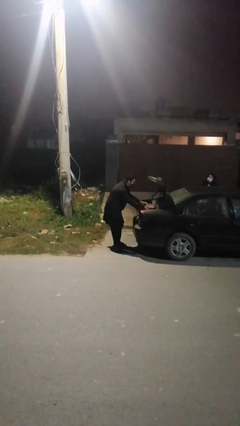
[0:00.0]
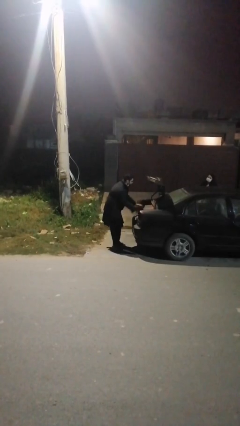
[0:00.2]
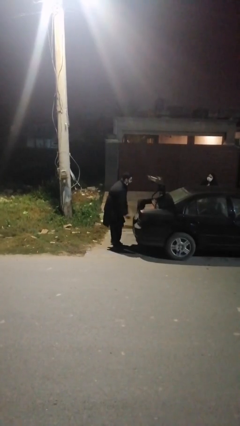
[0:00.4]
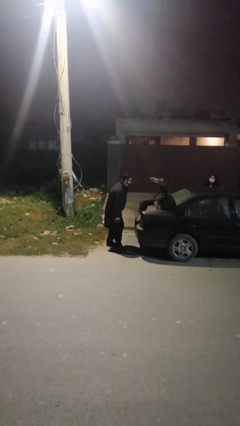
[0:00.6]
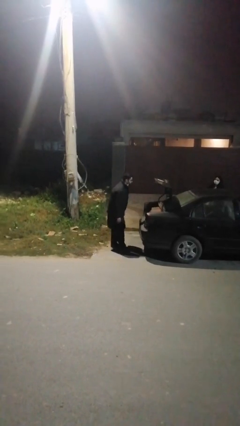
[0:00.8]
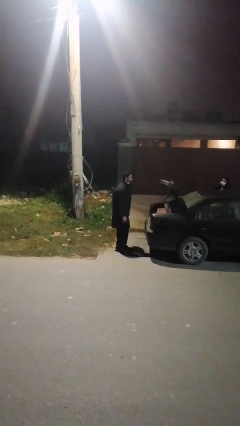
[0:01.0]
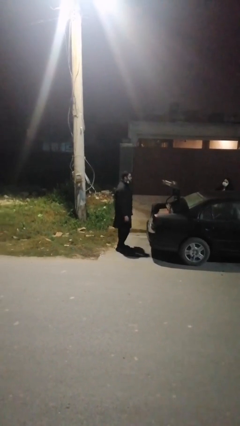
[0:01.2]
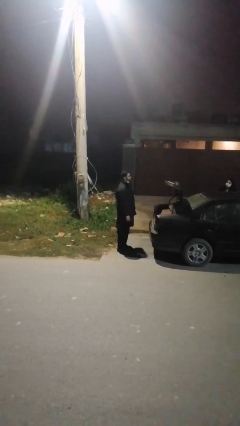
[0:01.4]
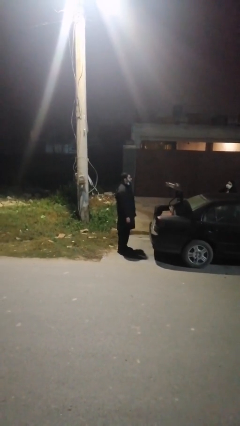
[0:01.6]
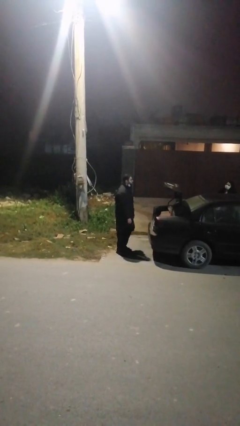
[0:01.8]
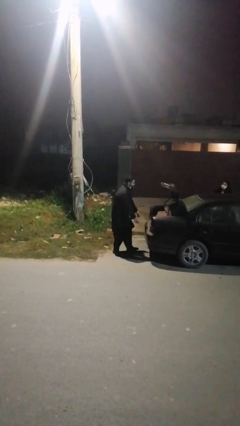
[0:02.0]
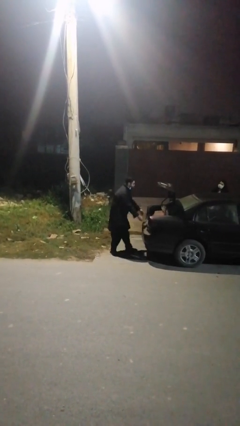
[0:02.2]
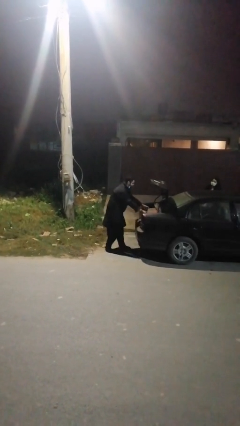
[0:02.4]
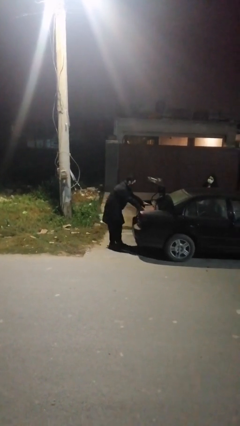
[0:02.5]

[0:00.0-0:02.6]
person loads car

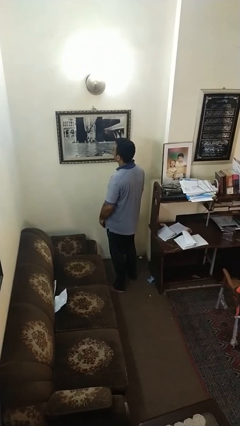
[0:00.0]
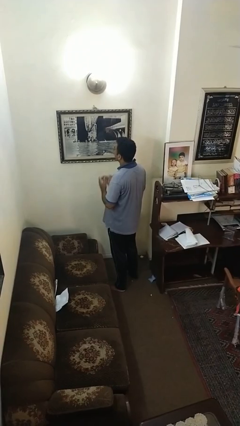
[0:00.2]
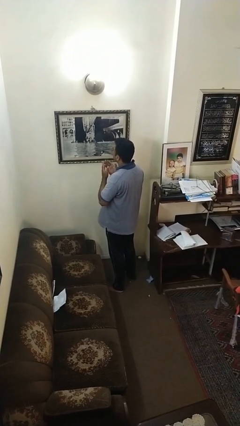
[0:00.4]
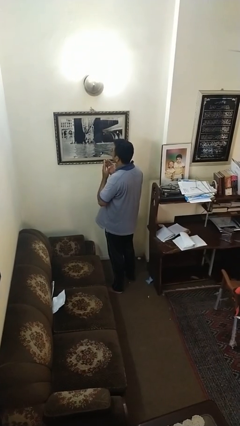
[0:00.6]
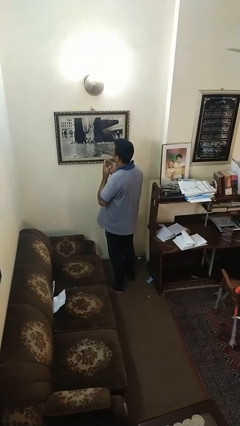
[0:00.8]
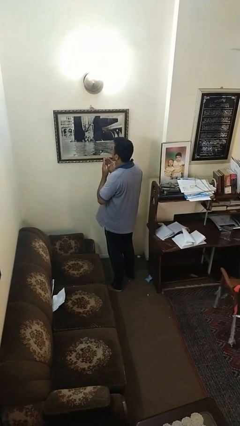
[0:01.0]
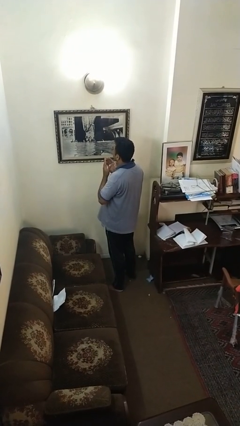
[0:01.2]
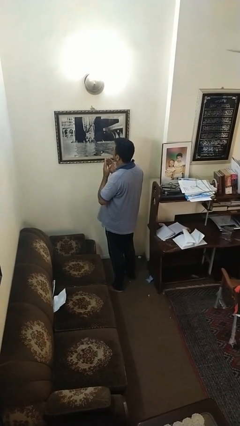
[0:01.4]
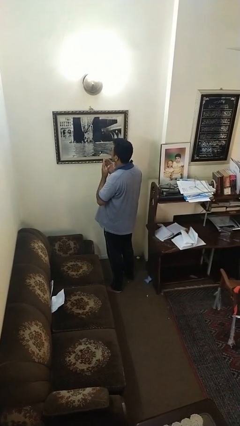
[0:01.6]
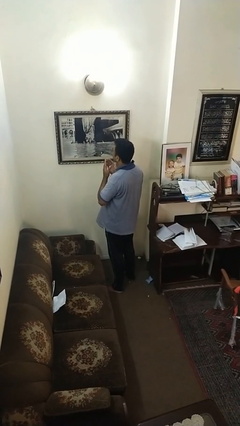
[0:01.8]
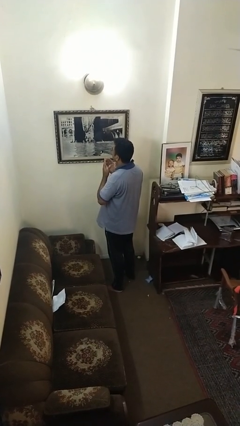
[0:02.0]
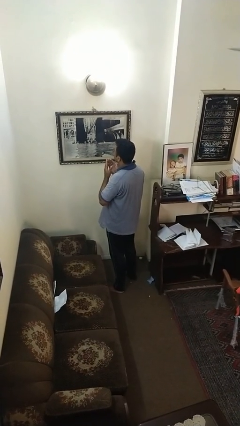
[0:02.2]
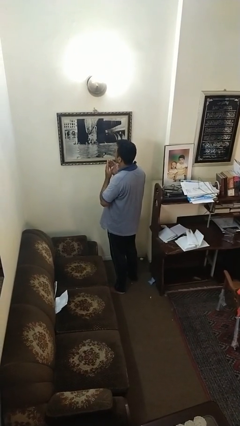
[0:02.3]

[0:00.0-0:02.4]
person prays

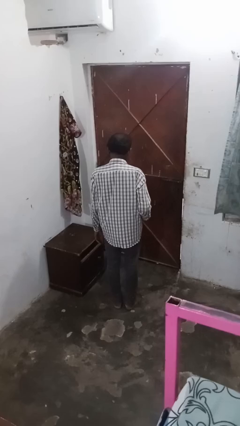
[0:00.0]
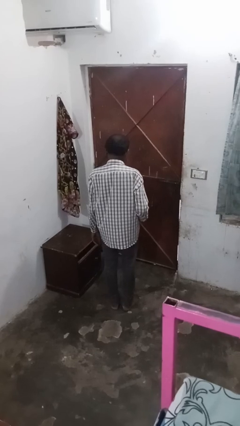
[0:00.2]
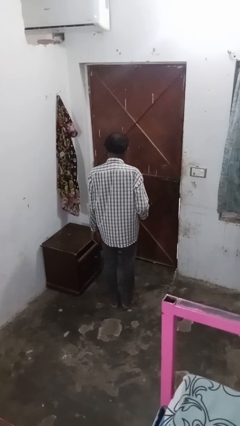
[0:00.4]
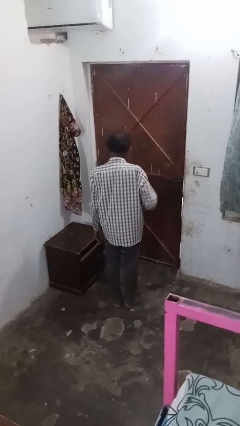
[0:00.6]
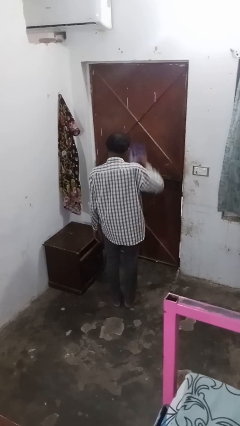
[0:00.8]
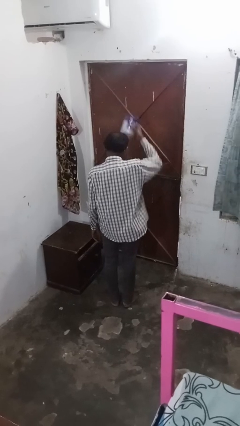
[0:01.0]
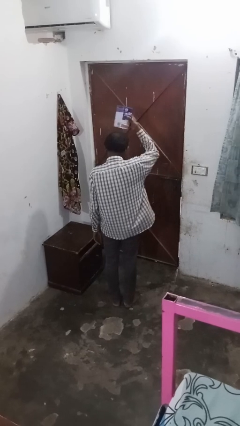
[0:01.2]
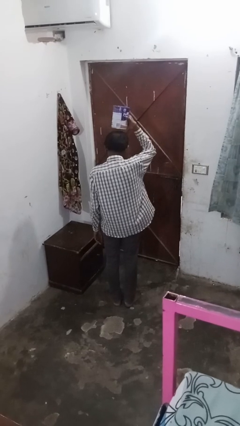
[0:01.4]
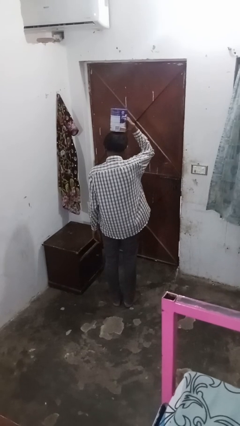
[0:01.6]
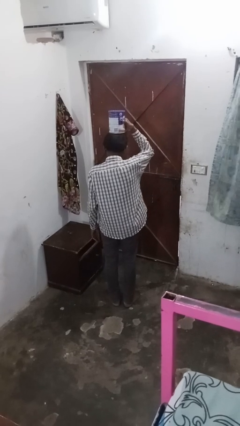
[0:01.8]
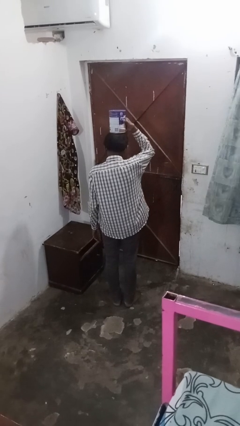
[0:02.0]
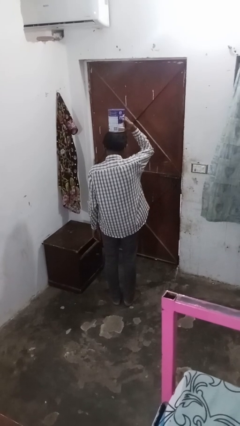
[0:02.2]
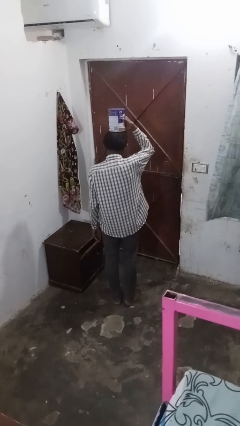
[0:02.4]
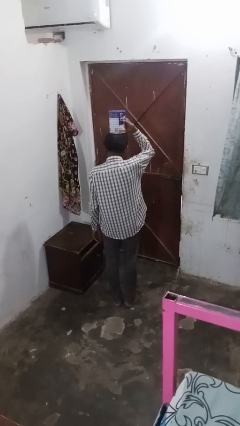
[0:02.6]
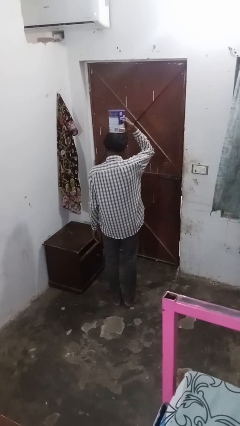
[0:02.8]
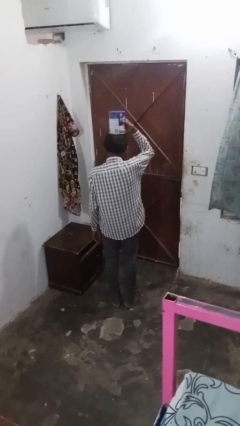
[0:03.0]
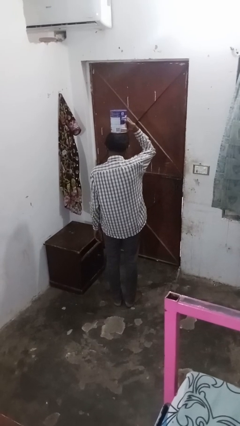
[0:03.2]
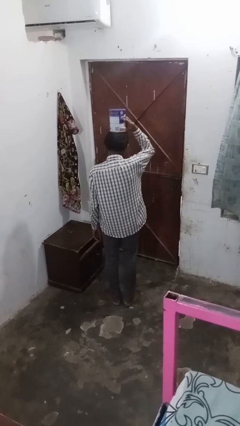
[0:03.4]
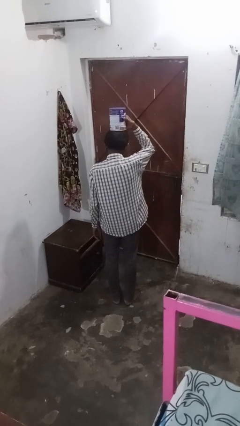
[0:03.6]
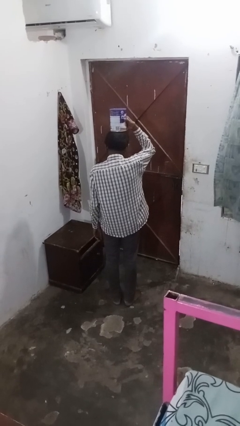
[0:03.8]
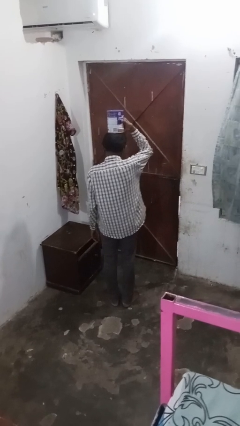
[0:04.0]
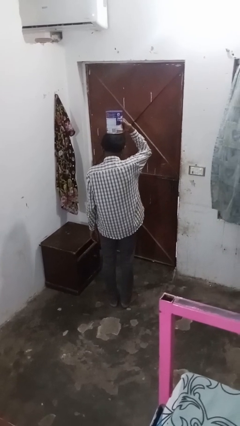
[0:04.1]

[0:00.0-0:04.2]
person holds object above head

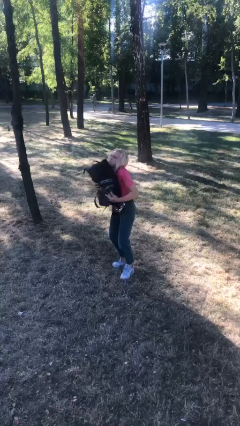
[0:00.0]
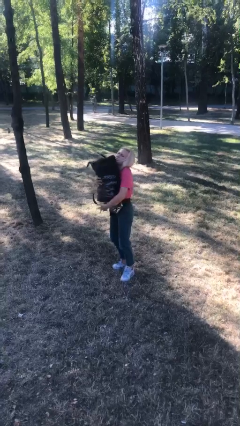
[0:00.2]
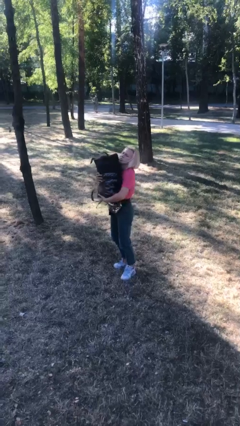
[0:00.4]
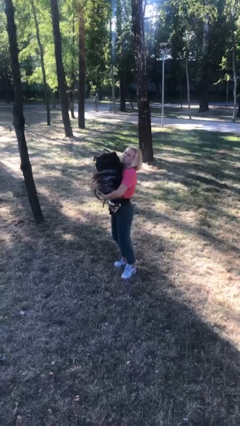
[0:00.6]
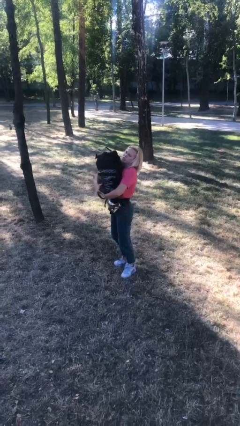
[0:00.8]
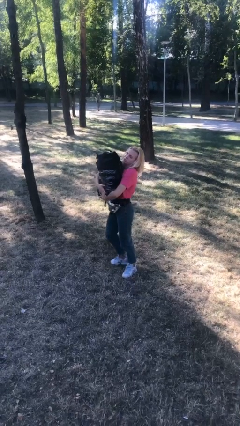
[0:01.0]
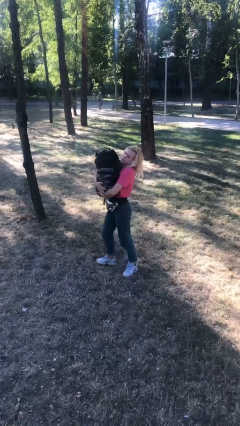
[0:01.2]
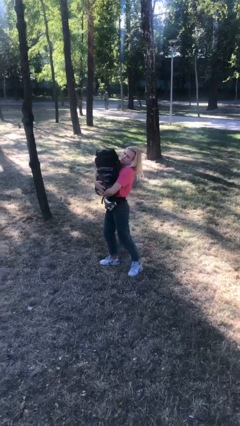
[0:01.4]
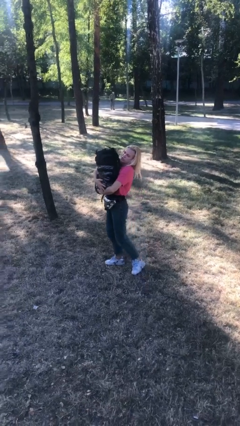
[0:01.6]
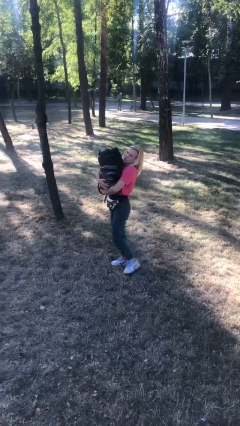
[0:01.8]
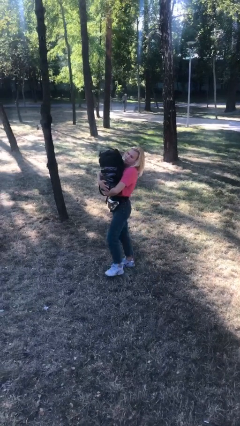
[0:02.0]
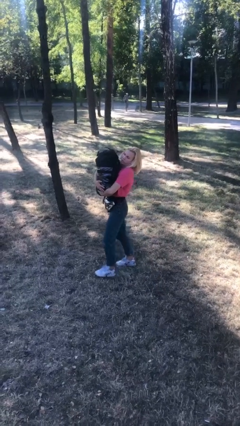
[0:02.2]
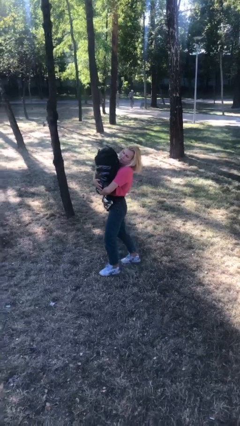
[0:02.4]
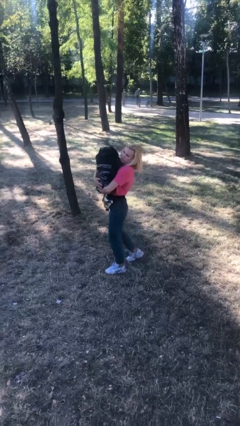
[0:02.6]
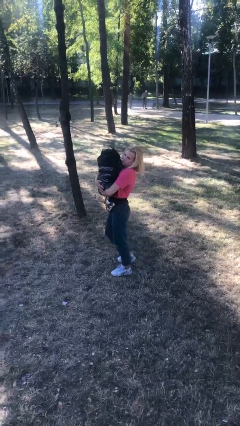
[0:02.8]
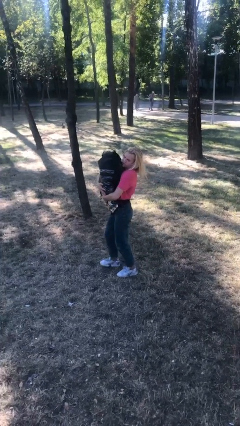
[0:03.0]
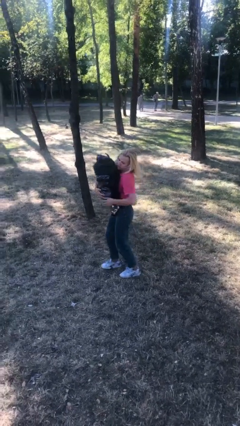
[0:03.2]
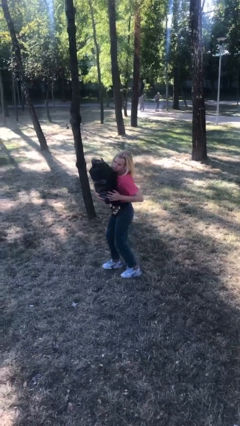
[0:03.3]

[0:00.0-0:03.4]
person carries heavy object

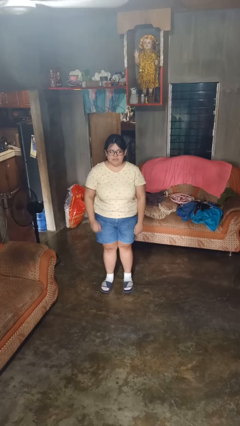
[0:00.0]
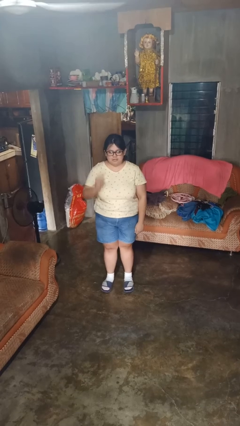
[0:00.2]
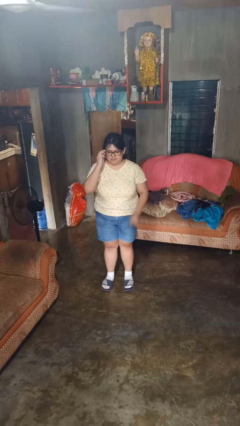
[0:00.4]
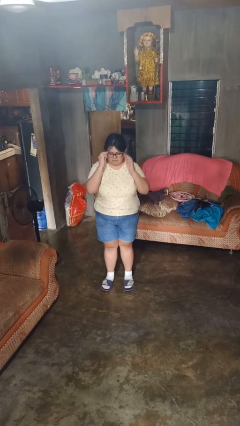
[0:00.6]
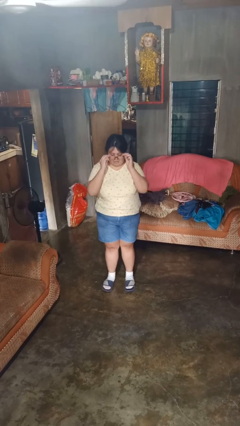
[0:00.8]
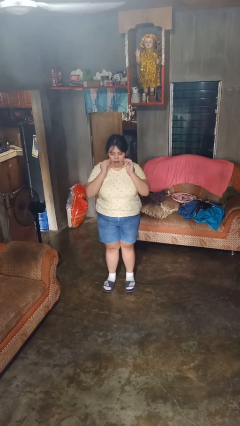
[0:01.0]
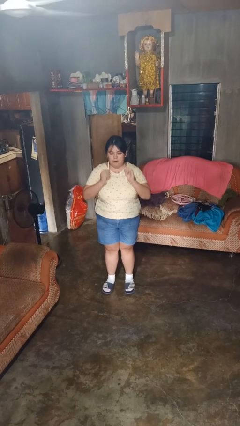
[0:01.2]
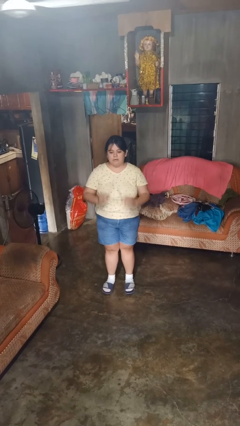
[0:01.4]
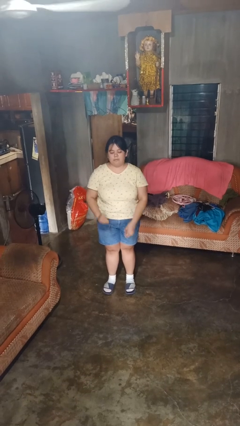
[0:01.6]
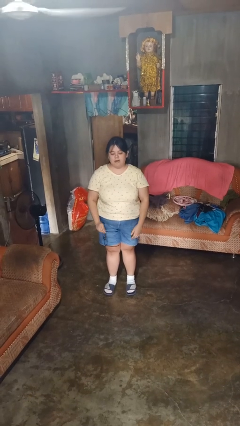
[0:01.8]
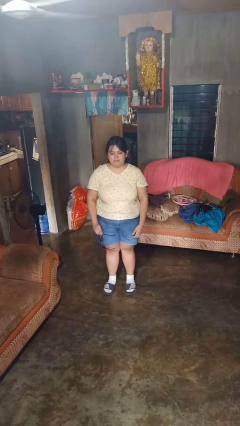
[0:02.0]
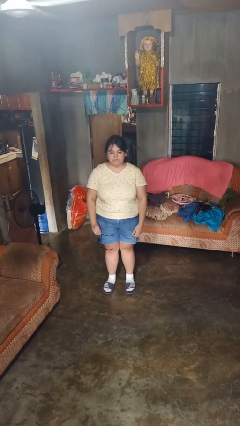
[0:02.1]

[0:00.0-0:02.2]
person takes off glasses

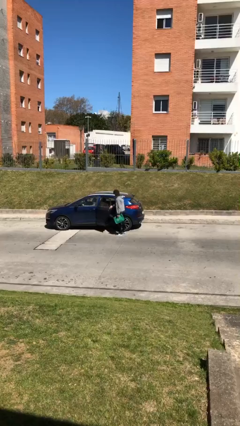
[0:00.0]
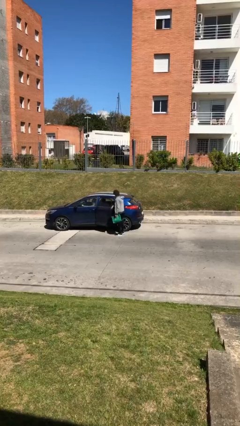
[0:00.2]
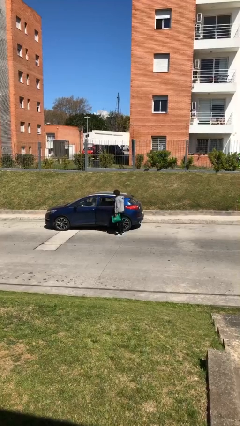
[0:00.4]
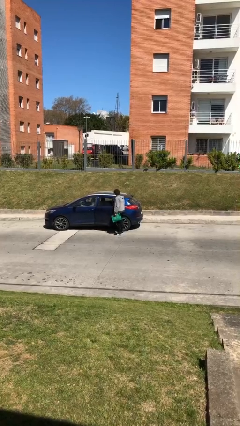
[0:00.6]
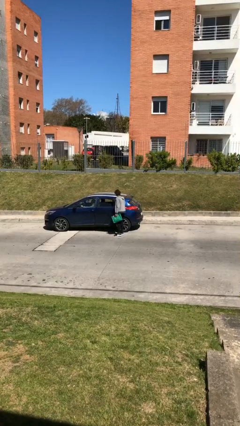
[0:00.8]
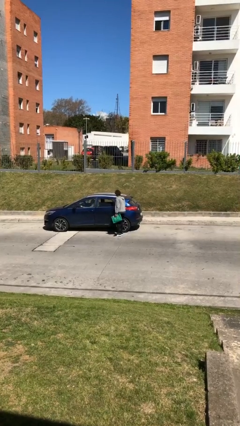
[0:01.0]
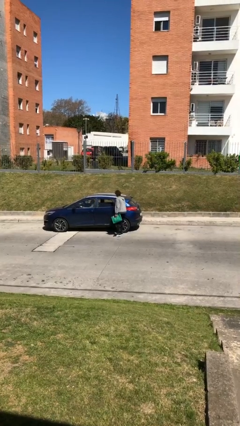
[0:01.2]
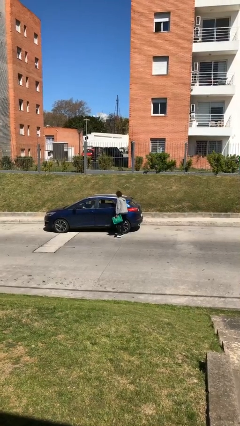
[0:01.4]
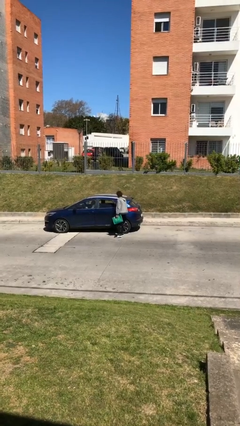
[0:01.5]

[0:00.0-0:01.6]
person closes car door

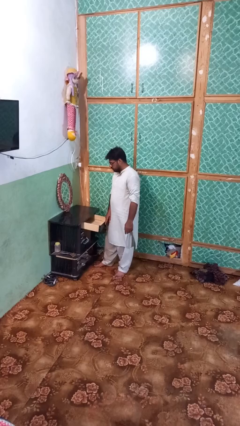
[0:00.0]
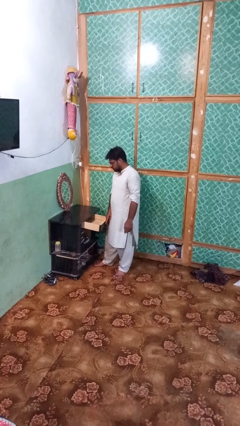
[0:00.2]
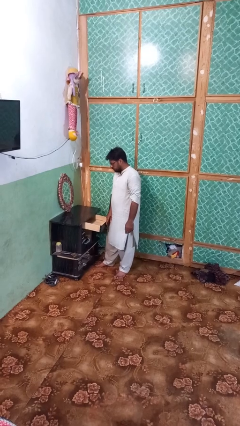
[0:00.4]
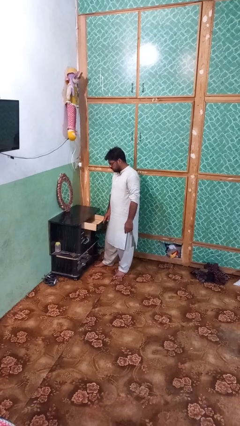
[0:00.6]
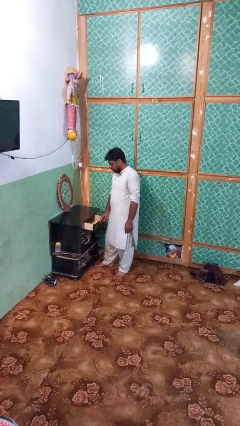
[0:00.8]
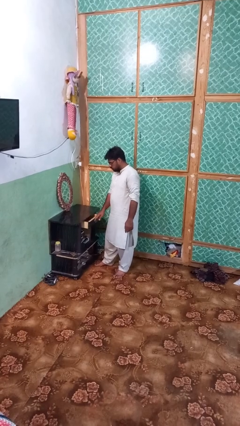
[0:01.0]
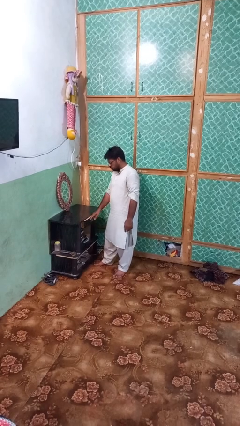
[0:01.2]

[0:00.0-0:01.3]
person closes dresser drawer
